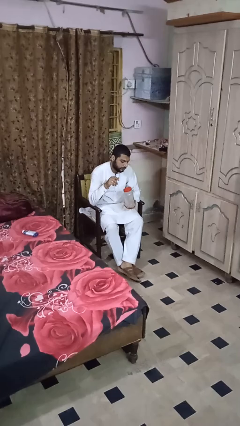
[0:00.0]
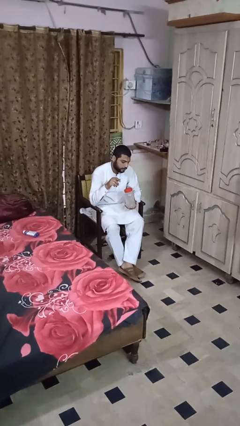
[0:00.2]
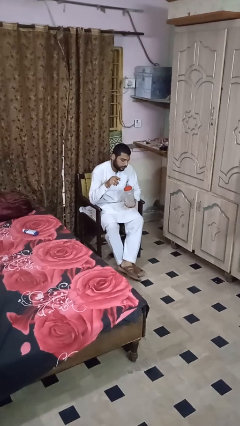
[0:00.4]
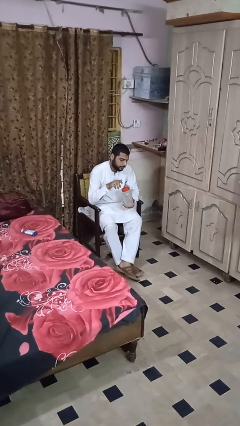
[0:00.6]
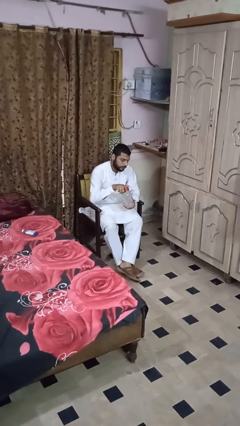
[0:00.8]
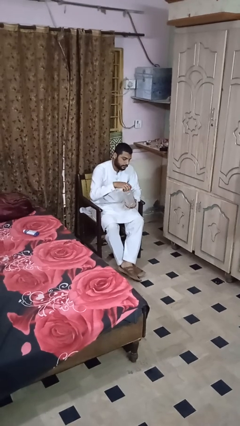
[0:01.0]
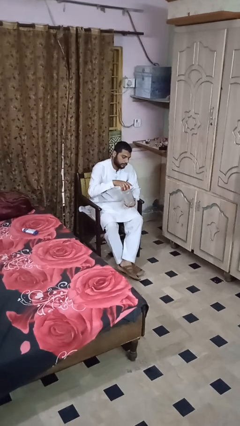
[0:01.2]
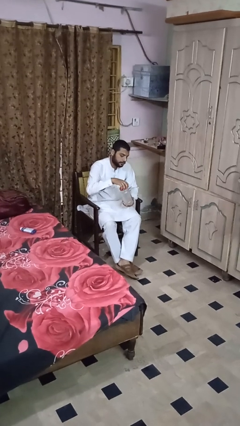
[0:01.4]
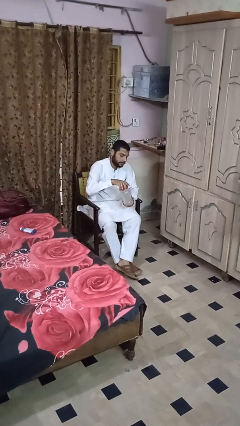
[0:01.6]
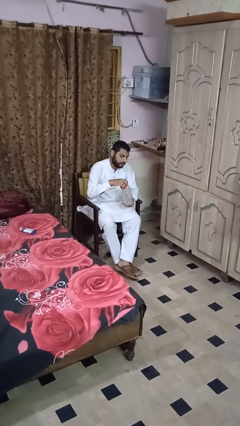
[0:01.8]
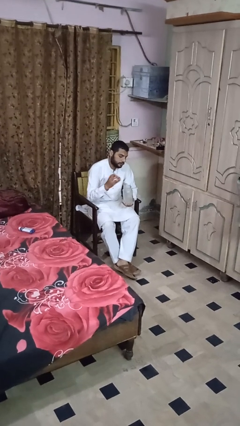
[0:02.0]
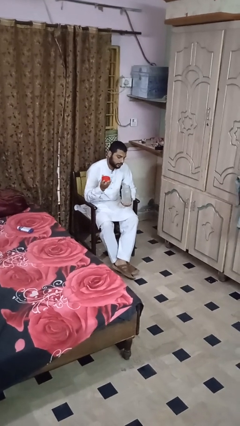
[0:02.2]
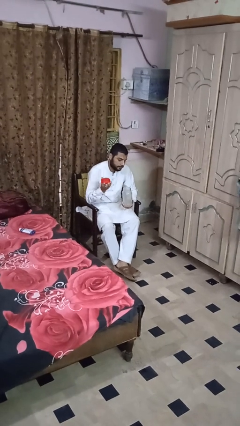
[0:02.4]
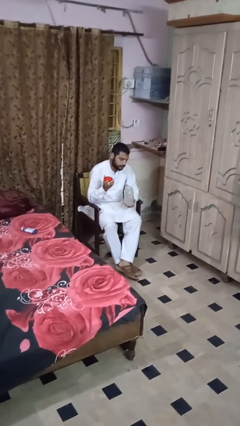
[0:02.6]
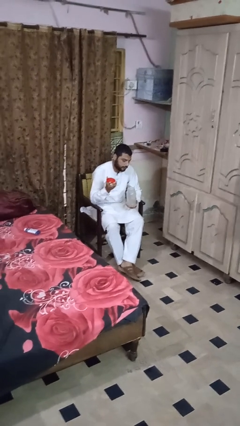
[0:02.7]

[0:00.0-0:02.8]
person opens jar

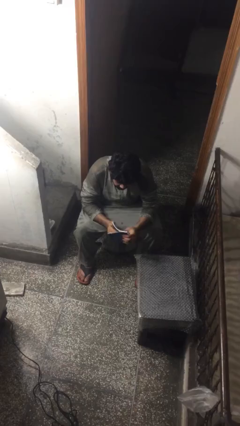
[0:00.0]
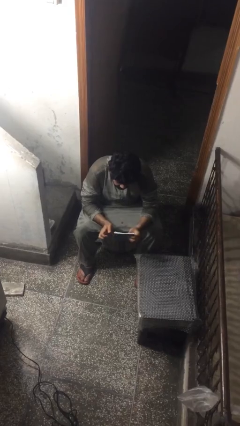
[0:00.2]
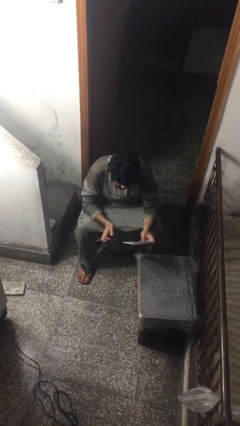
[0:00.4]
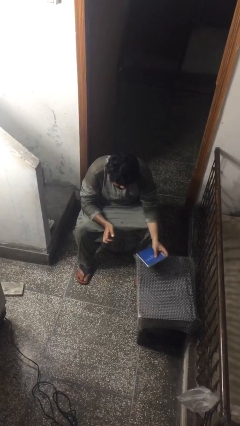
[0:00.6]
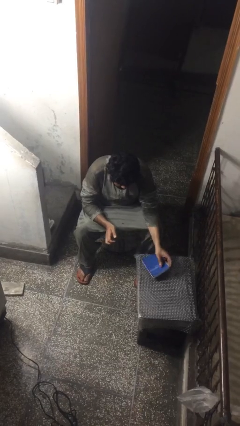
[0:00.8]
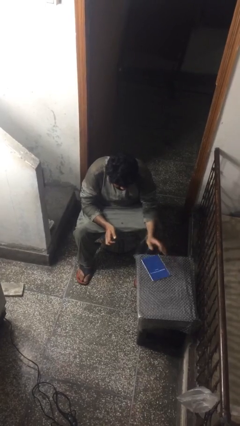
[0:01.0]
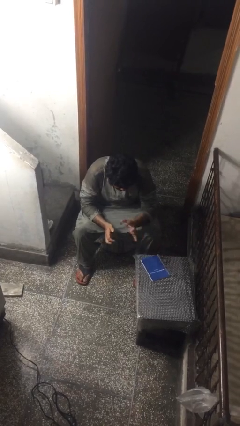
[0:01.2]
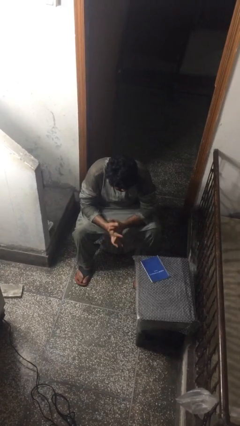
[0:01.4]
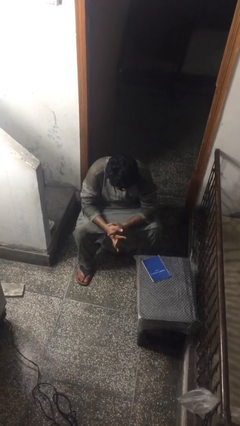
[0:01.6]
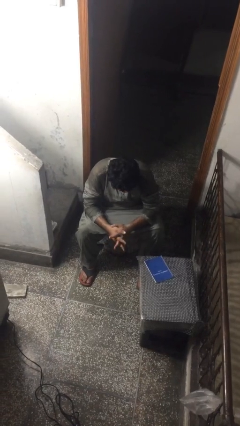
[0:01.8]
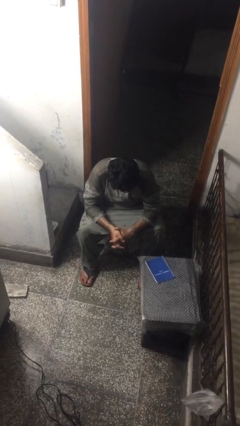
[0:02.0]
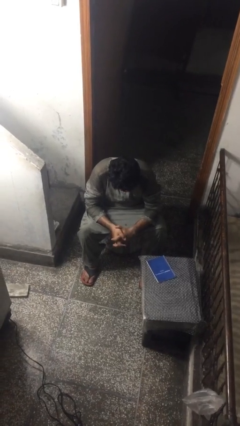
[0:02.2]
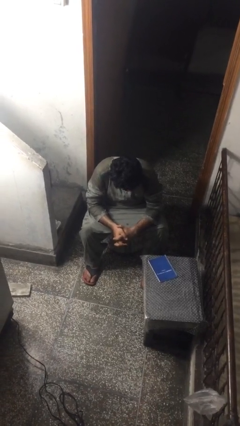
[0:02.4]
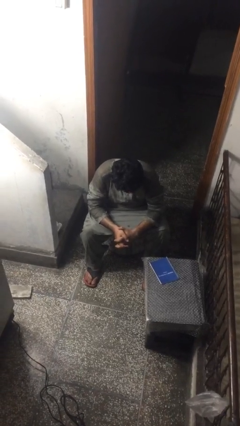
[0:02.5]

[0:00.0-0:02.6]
person puts down object on table

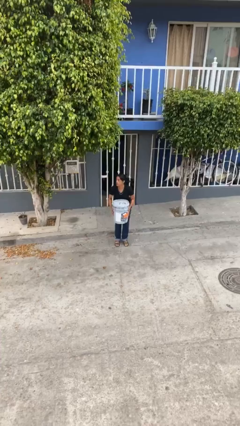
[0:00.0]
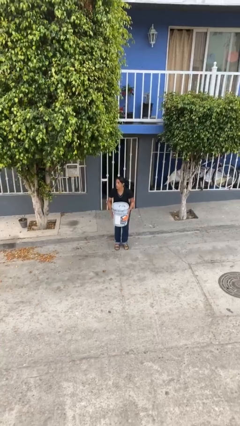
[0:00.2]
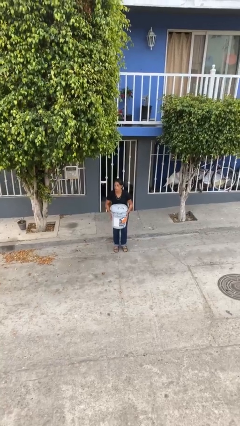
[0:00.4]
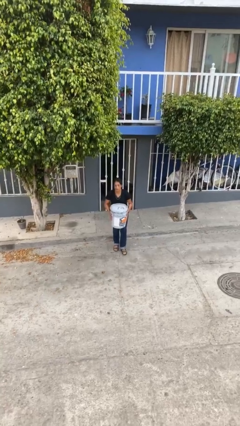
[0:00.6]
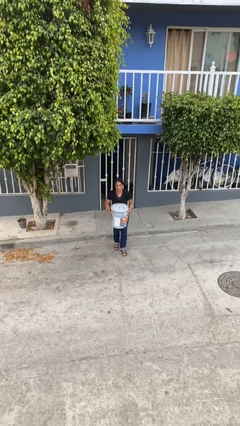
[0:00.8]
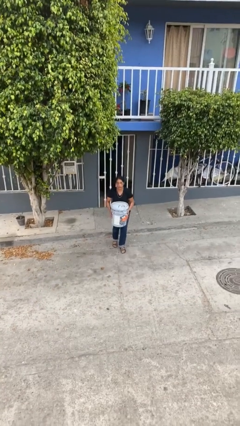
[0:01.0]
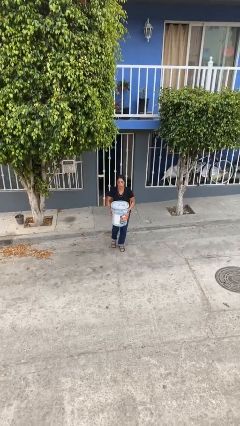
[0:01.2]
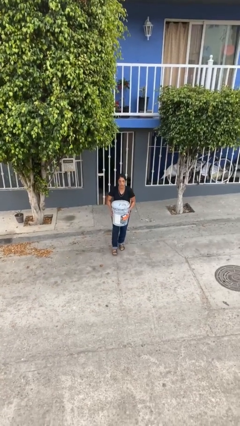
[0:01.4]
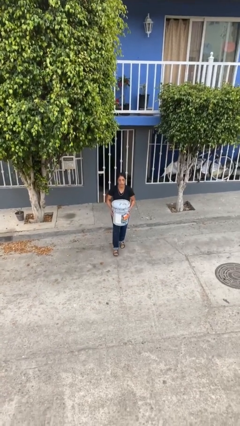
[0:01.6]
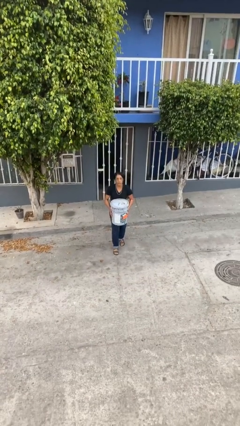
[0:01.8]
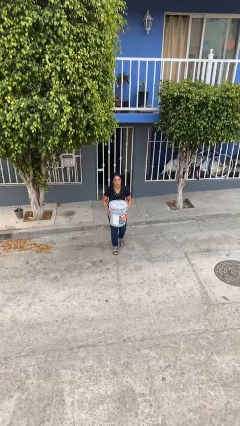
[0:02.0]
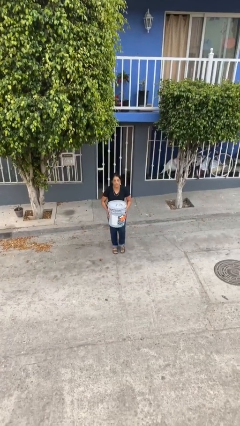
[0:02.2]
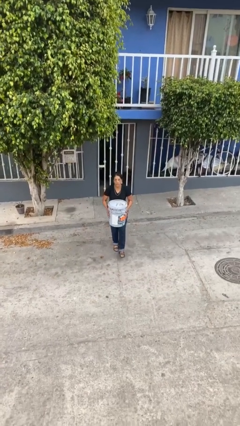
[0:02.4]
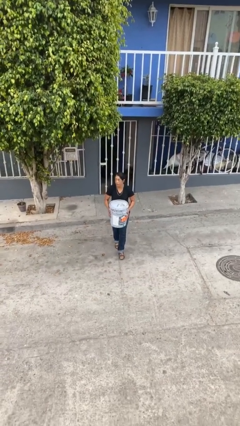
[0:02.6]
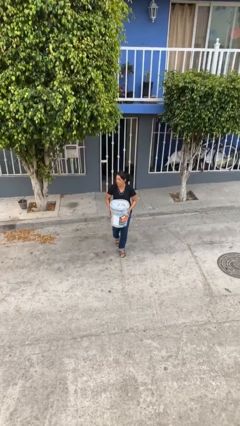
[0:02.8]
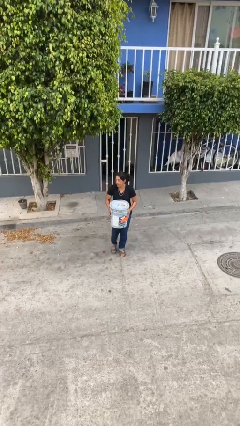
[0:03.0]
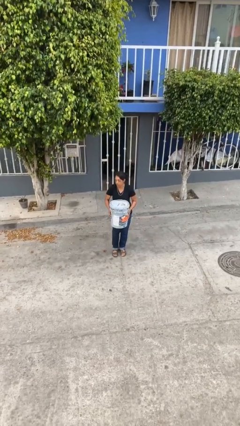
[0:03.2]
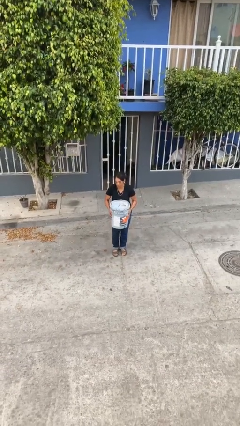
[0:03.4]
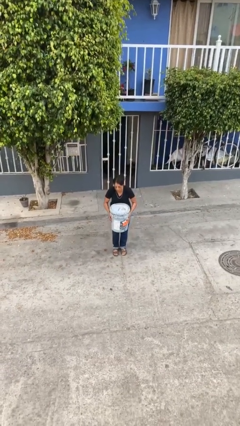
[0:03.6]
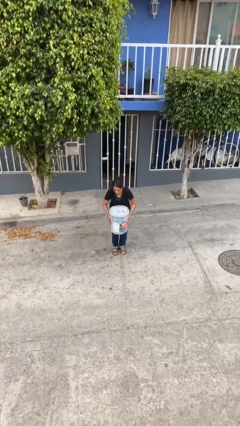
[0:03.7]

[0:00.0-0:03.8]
person carries heavy object

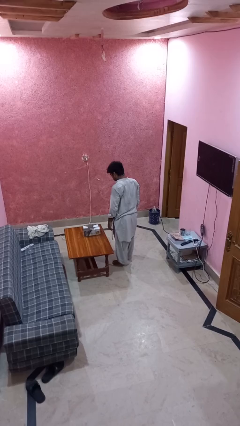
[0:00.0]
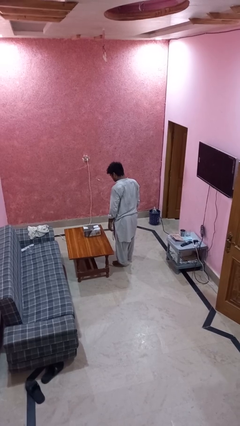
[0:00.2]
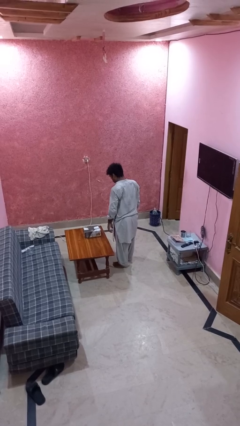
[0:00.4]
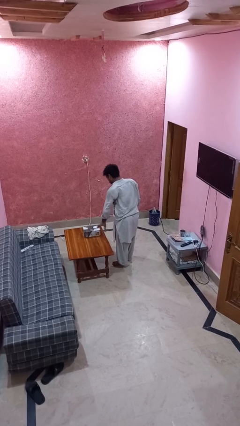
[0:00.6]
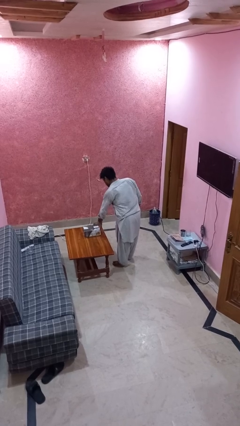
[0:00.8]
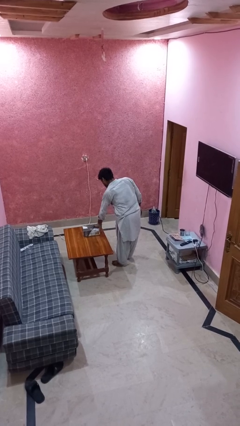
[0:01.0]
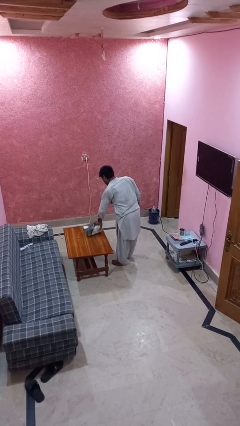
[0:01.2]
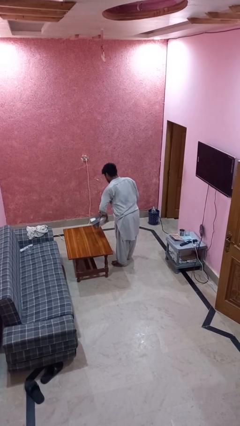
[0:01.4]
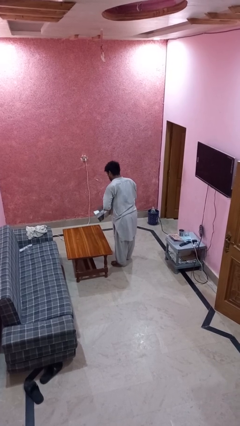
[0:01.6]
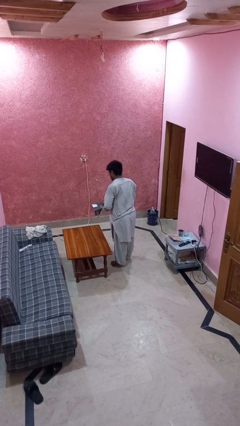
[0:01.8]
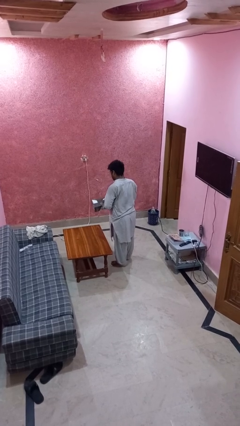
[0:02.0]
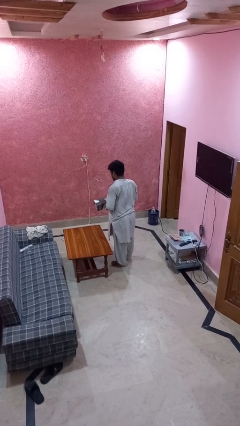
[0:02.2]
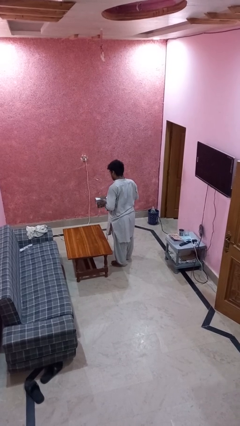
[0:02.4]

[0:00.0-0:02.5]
person picks up object from table

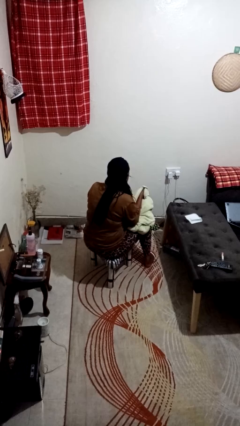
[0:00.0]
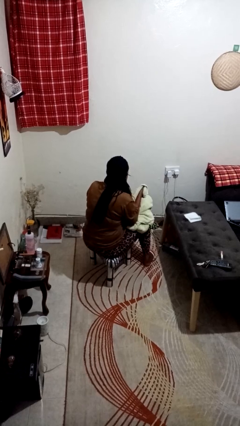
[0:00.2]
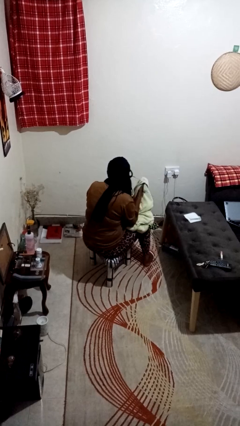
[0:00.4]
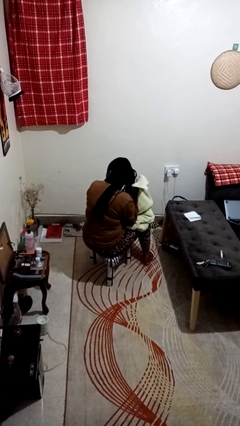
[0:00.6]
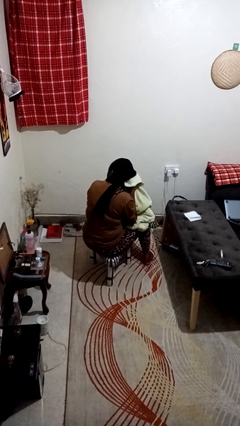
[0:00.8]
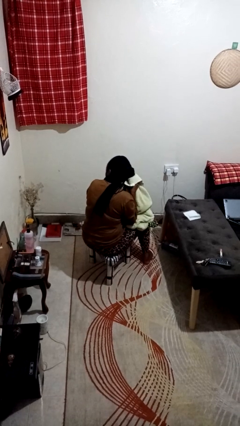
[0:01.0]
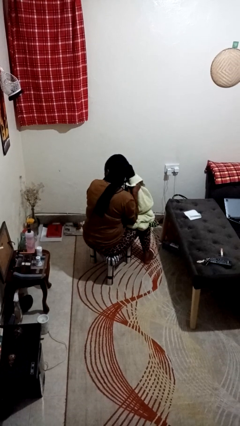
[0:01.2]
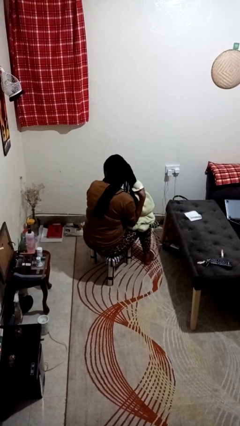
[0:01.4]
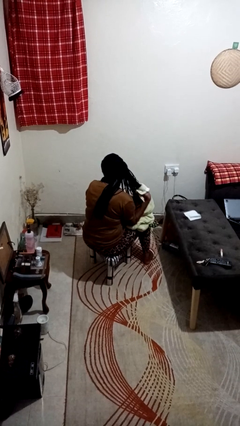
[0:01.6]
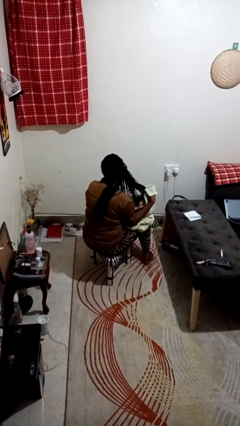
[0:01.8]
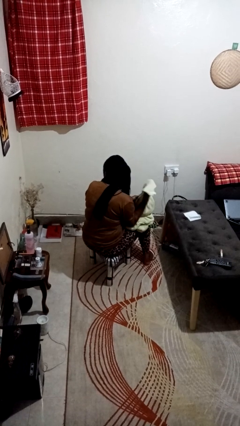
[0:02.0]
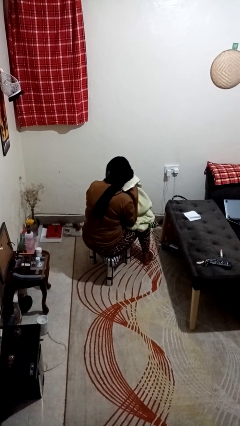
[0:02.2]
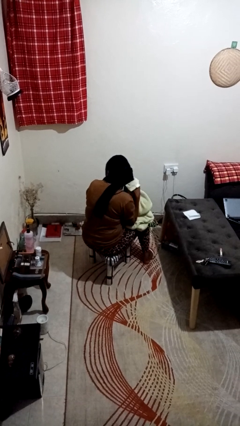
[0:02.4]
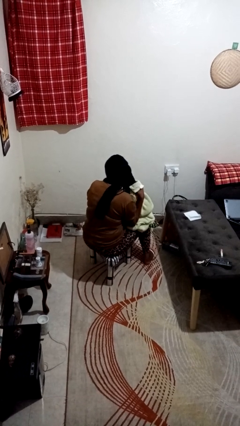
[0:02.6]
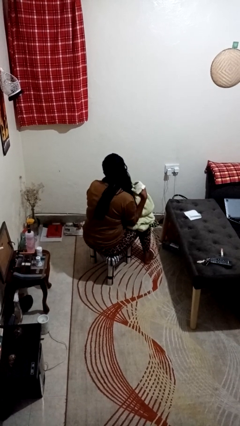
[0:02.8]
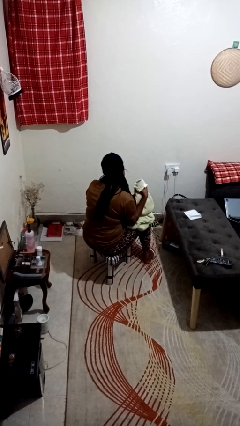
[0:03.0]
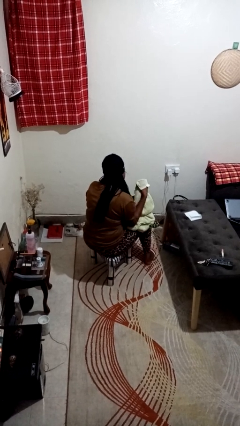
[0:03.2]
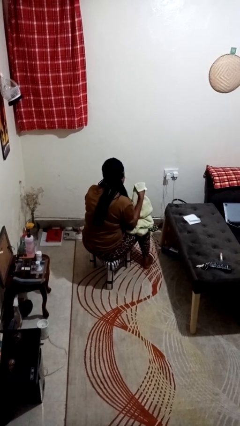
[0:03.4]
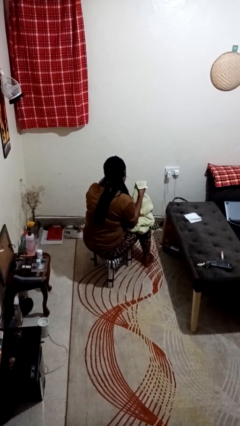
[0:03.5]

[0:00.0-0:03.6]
person dries hair with towel

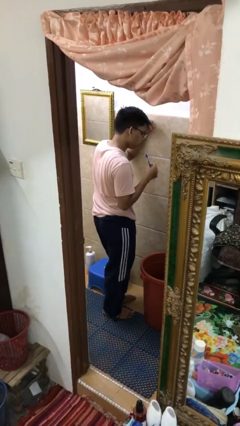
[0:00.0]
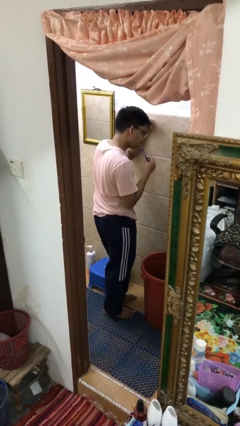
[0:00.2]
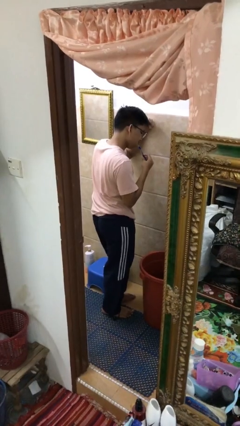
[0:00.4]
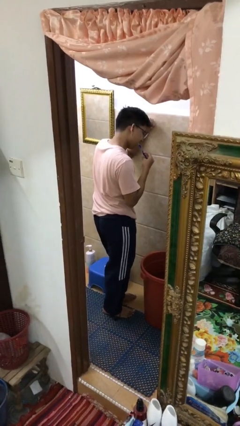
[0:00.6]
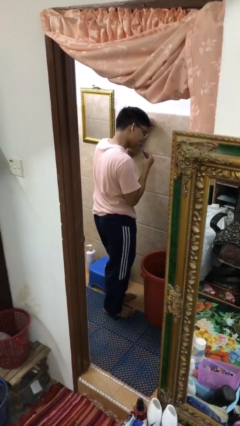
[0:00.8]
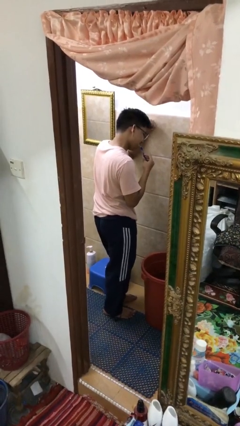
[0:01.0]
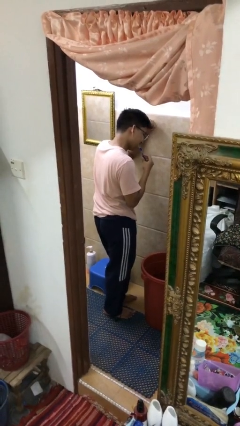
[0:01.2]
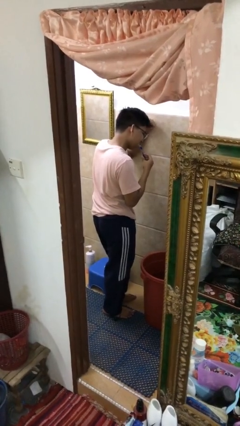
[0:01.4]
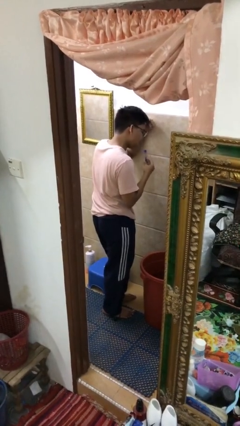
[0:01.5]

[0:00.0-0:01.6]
person brushes teeth
